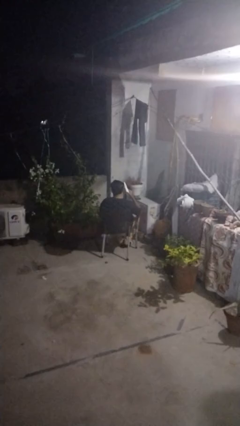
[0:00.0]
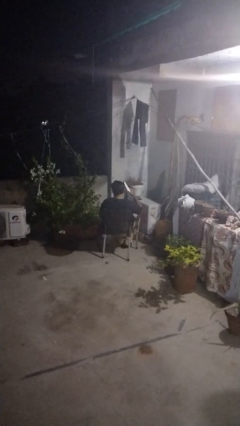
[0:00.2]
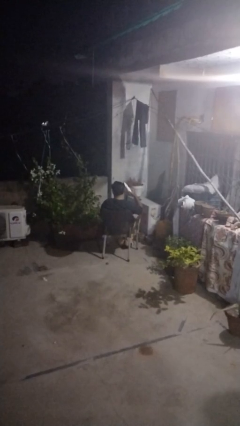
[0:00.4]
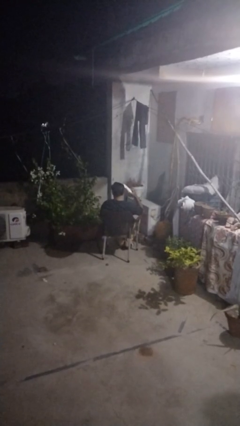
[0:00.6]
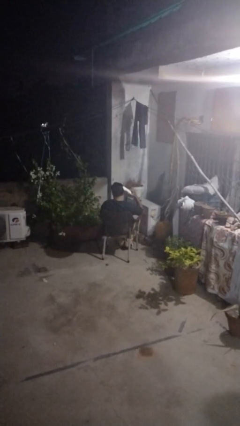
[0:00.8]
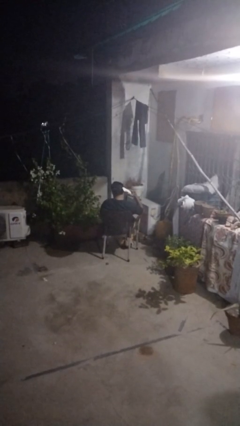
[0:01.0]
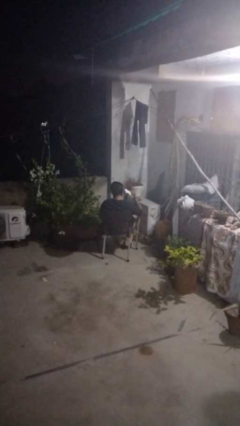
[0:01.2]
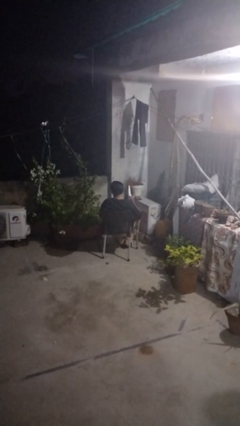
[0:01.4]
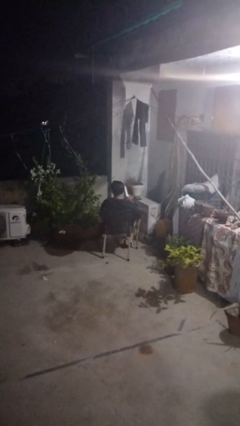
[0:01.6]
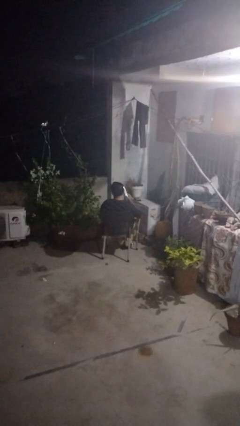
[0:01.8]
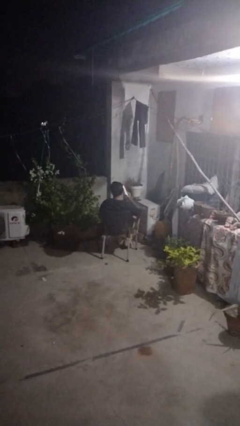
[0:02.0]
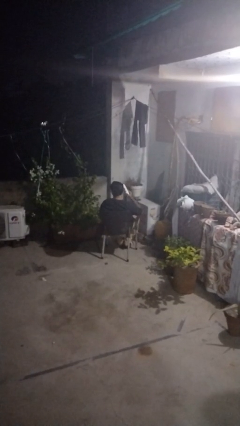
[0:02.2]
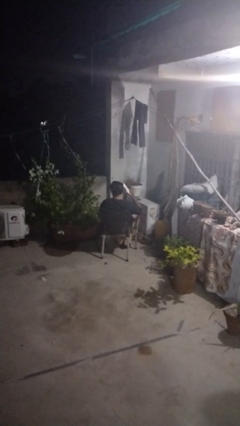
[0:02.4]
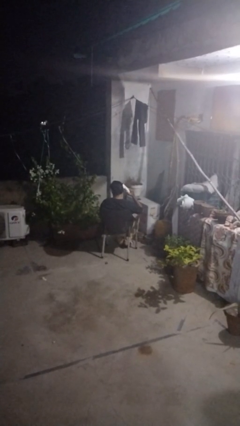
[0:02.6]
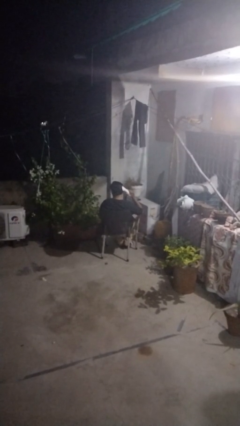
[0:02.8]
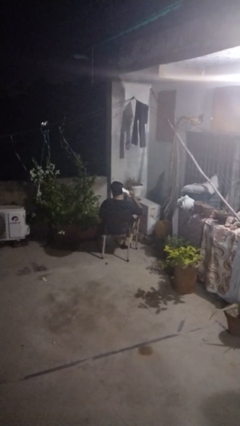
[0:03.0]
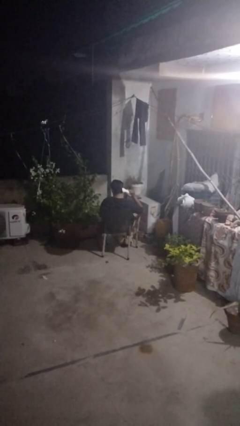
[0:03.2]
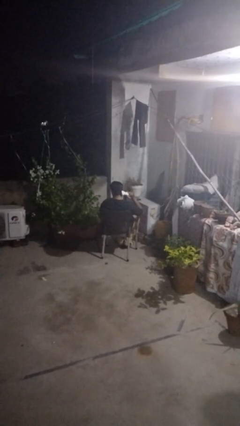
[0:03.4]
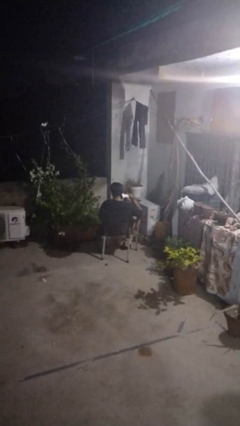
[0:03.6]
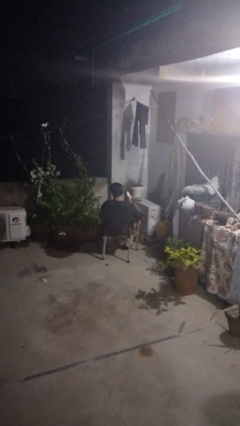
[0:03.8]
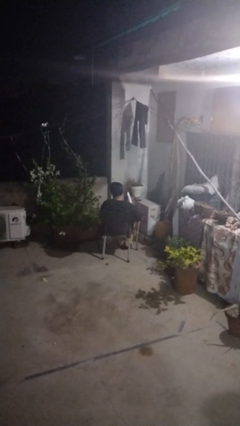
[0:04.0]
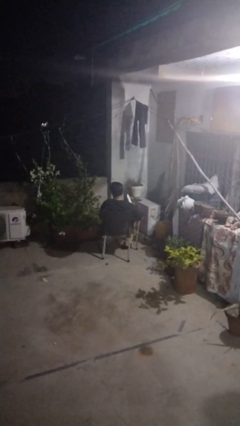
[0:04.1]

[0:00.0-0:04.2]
person dries hair with hairdryer

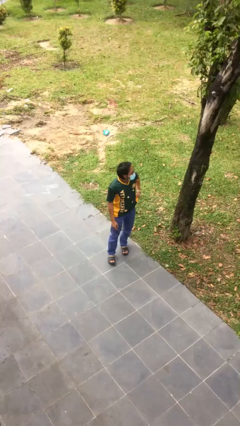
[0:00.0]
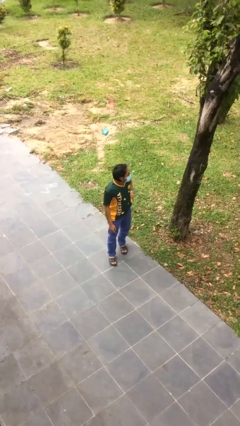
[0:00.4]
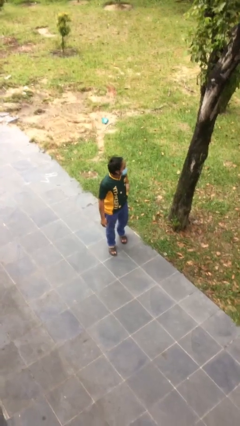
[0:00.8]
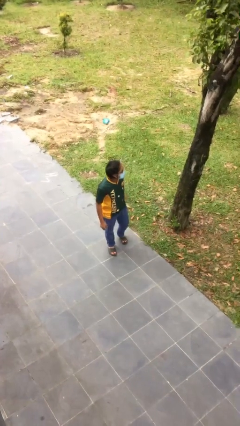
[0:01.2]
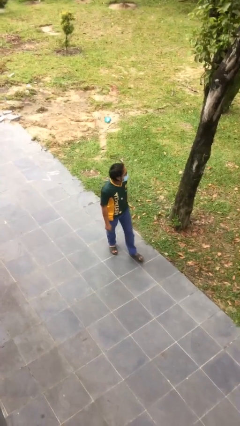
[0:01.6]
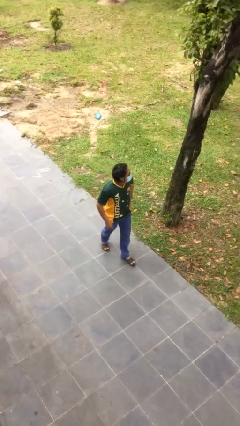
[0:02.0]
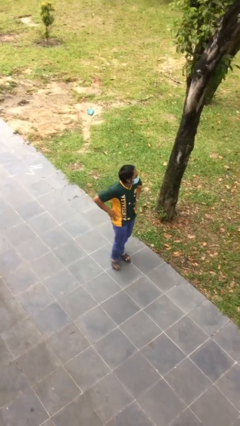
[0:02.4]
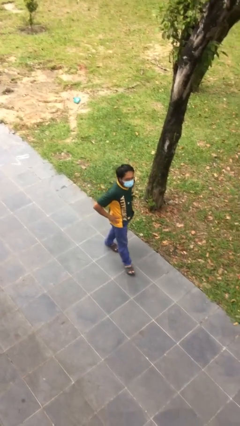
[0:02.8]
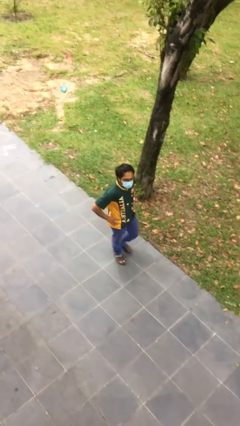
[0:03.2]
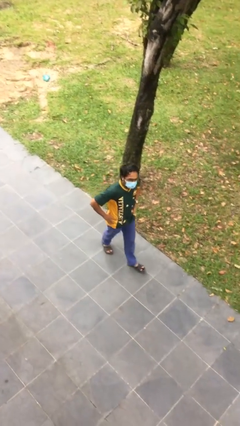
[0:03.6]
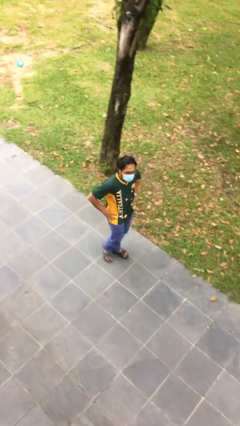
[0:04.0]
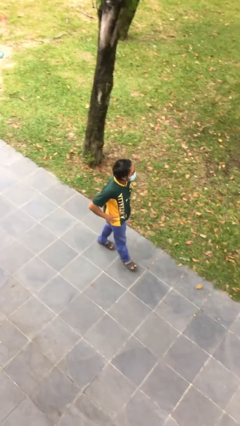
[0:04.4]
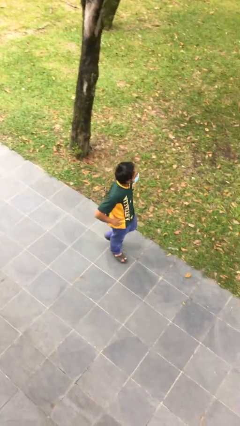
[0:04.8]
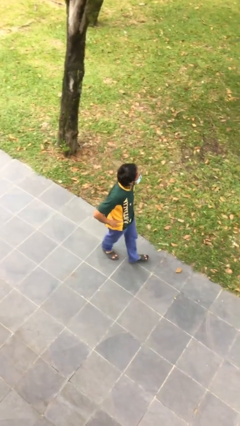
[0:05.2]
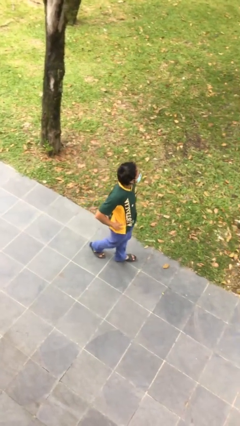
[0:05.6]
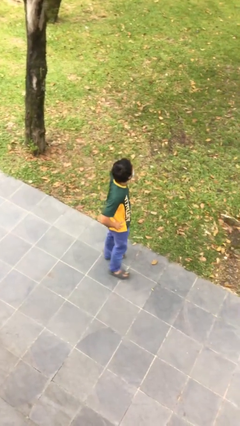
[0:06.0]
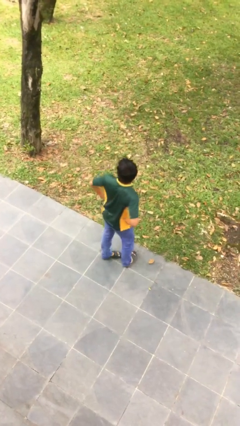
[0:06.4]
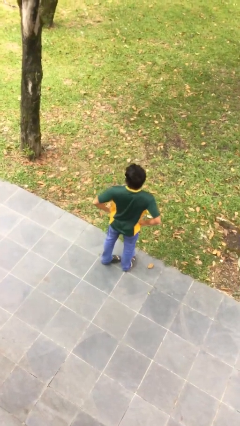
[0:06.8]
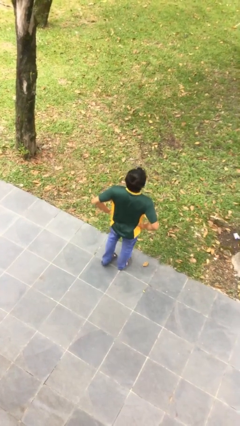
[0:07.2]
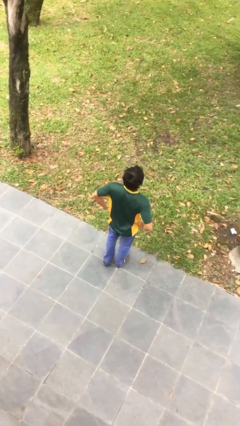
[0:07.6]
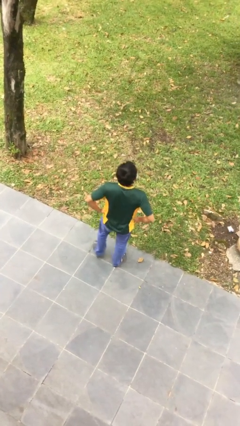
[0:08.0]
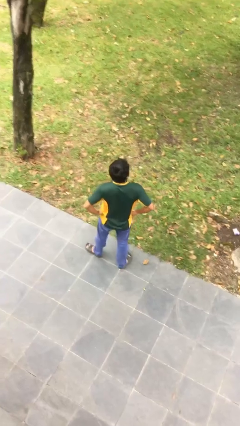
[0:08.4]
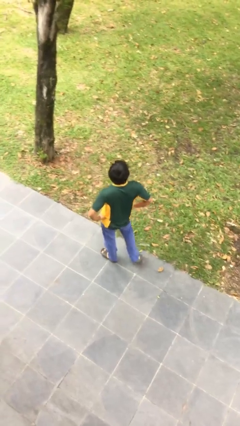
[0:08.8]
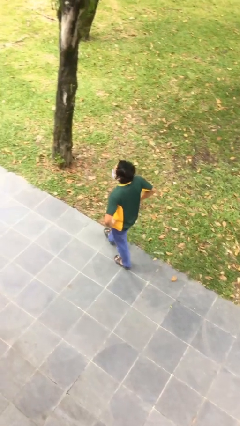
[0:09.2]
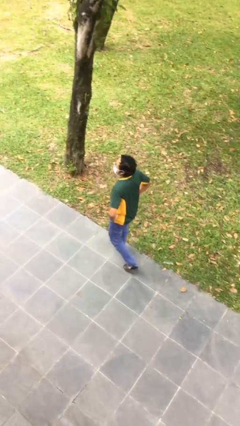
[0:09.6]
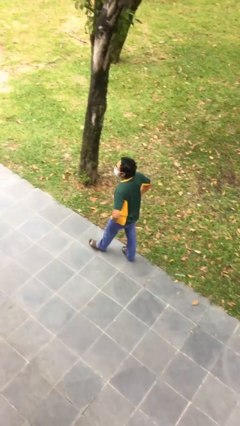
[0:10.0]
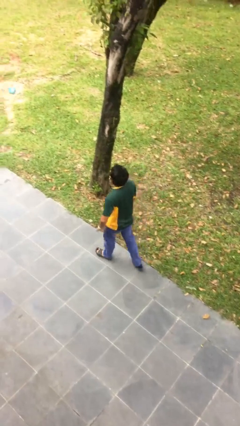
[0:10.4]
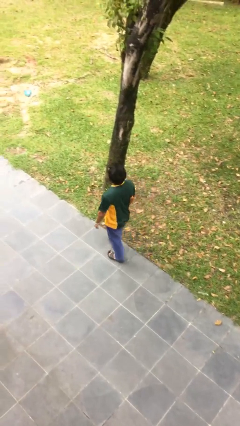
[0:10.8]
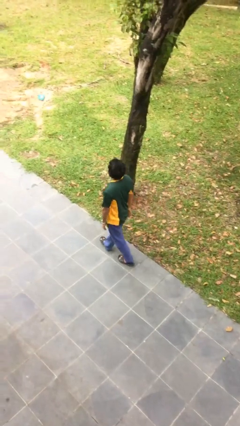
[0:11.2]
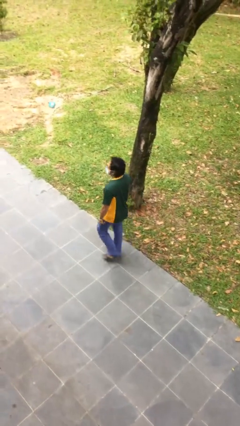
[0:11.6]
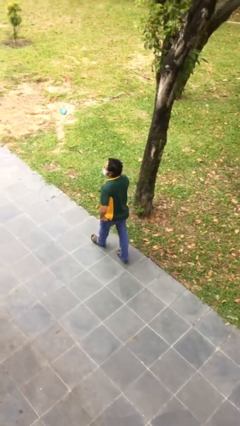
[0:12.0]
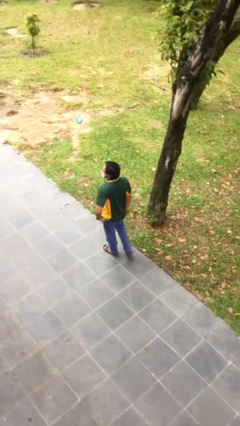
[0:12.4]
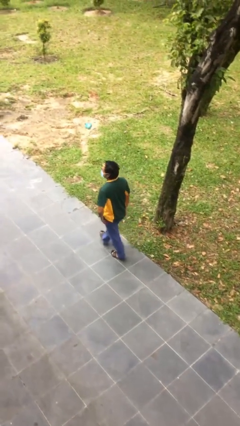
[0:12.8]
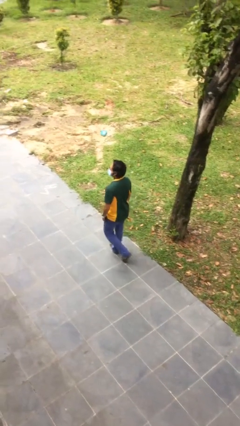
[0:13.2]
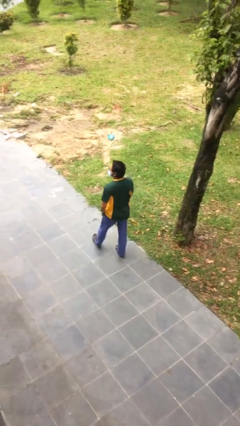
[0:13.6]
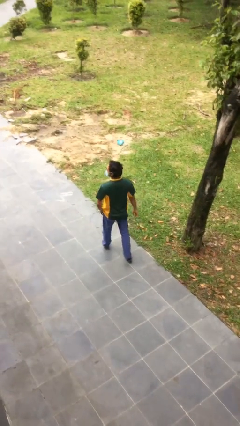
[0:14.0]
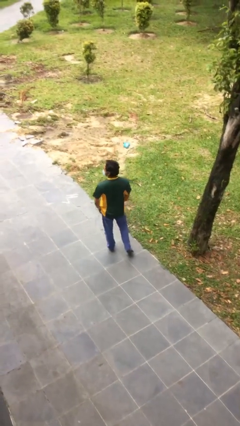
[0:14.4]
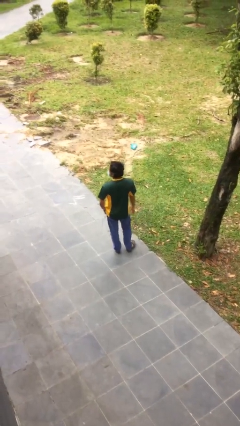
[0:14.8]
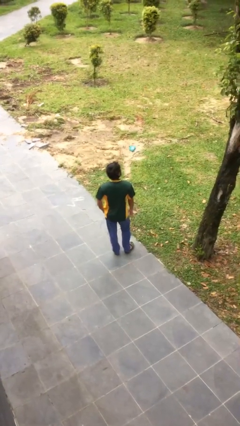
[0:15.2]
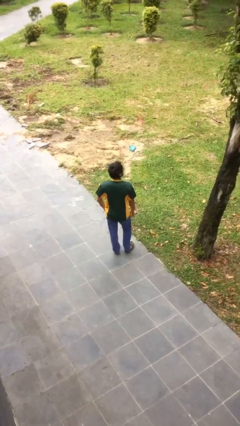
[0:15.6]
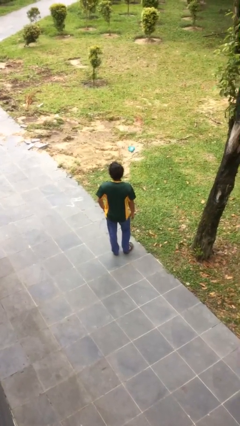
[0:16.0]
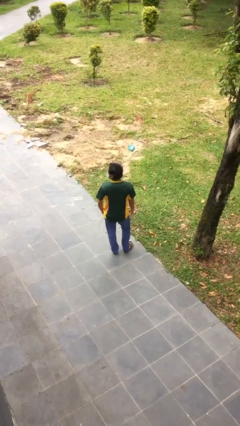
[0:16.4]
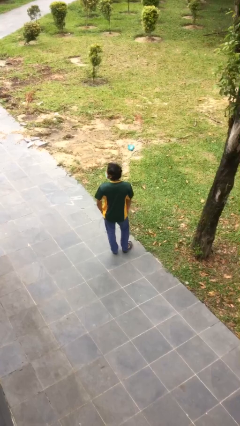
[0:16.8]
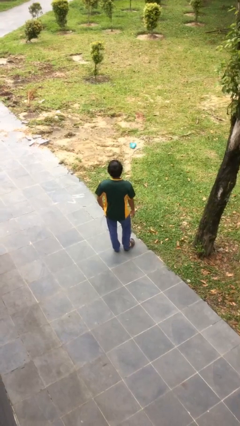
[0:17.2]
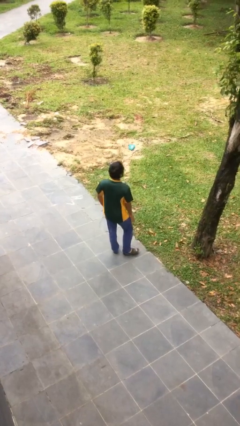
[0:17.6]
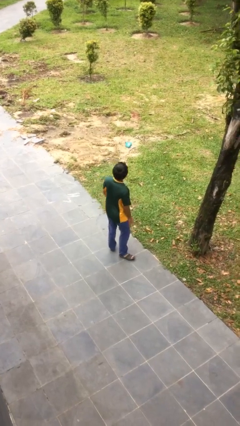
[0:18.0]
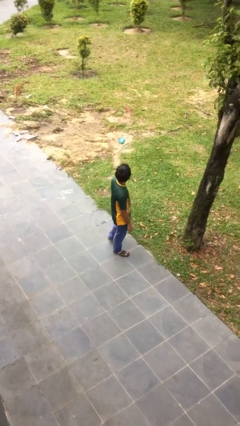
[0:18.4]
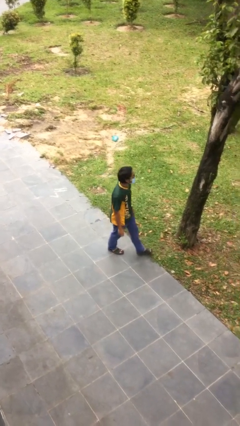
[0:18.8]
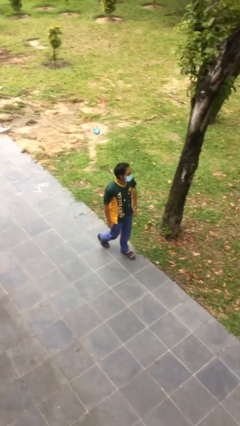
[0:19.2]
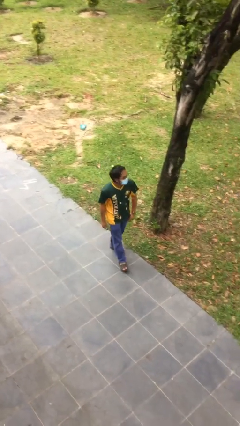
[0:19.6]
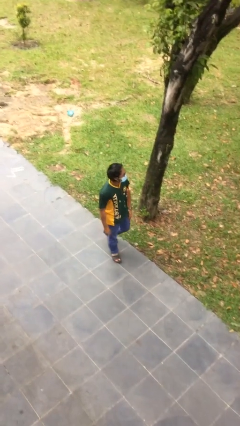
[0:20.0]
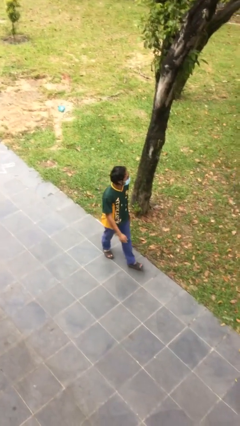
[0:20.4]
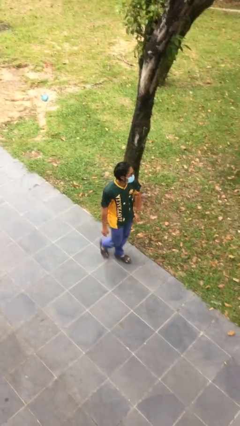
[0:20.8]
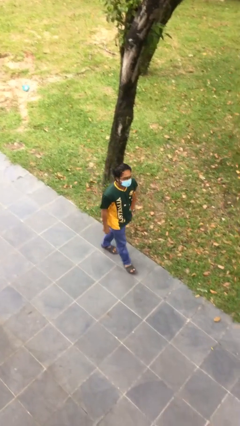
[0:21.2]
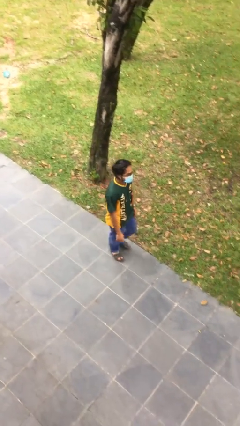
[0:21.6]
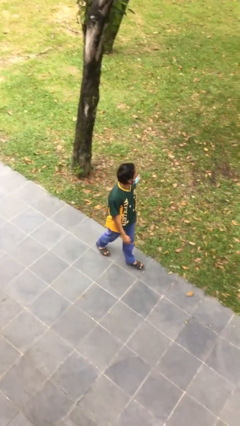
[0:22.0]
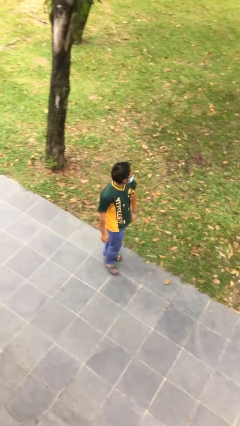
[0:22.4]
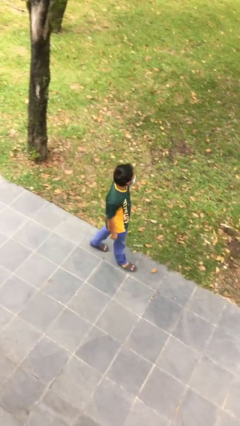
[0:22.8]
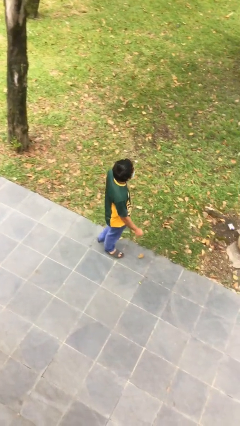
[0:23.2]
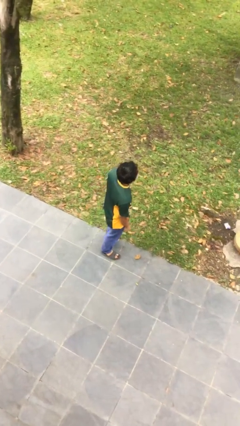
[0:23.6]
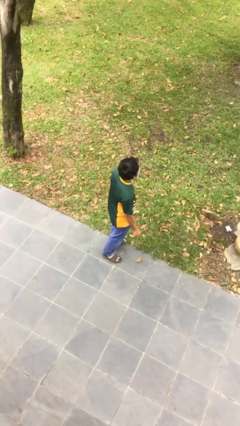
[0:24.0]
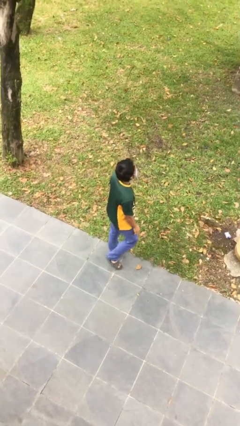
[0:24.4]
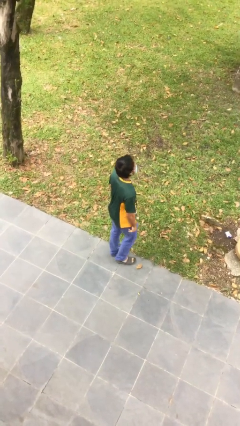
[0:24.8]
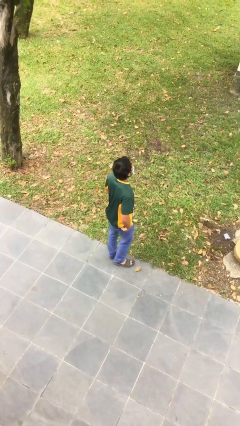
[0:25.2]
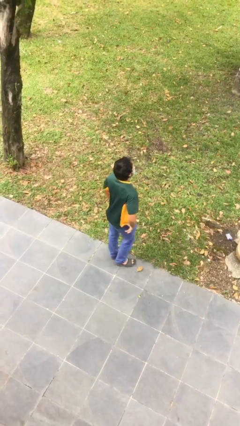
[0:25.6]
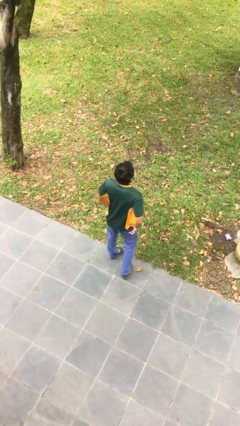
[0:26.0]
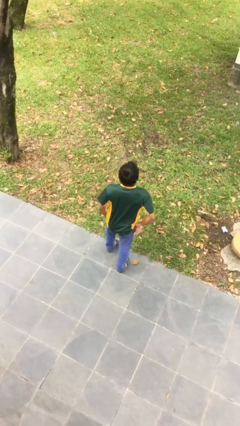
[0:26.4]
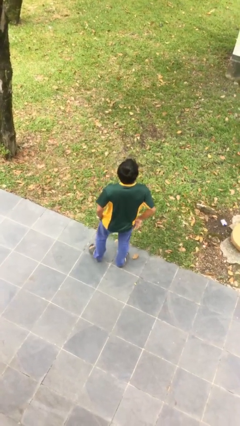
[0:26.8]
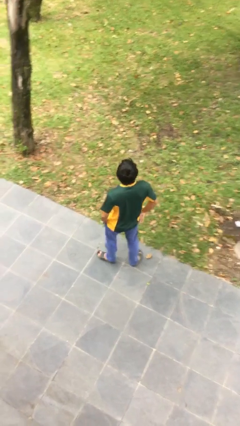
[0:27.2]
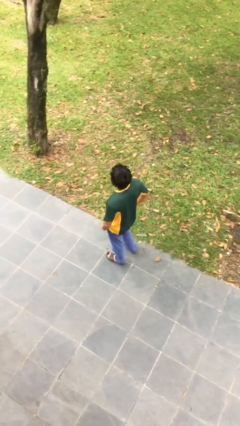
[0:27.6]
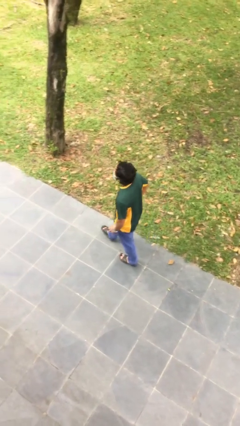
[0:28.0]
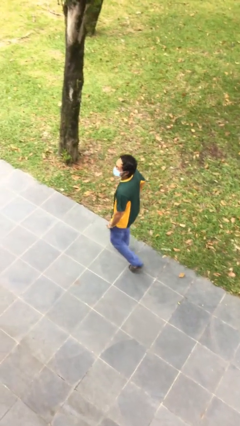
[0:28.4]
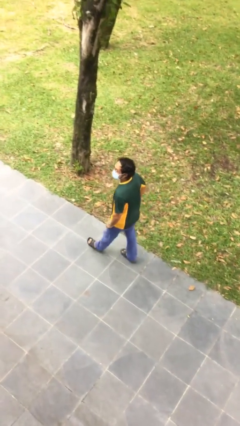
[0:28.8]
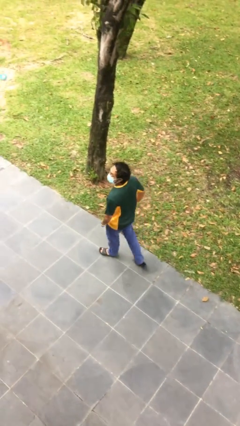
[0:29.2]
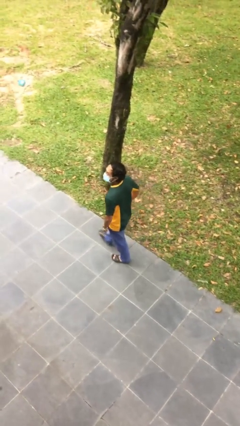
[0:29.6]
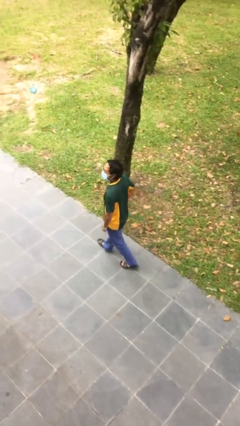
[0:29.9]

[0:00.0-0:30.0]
person walks
